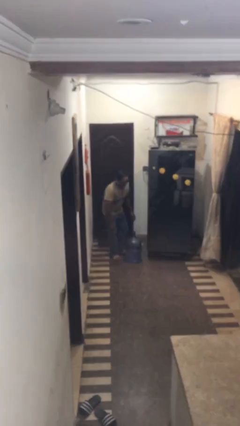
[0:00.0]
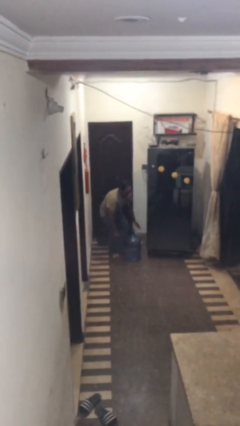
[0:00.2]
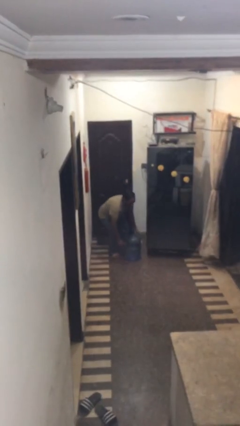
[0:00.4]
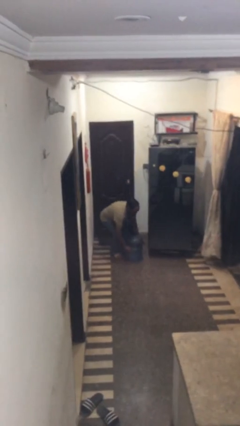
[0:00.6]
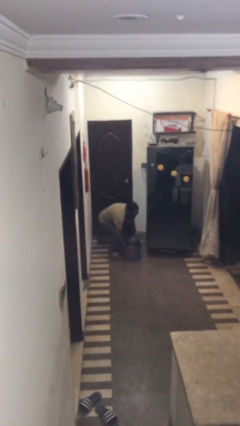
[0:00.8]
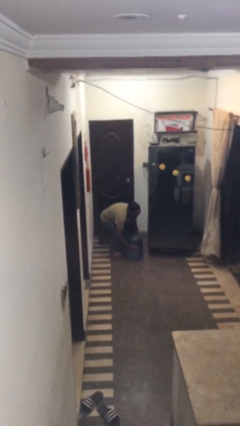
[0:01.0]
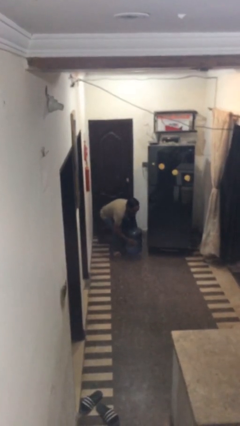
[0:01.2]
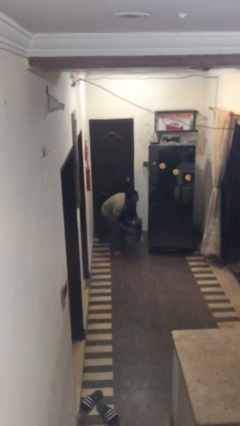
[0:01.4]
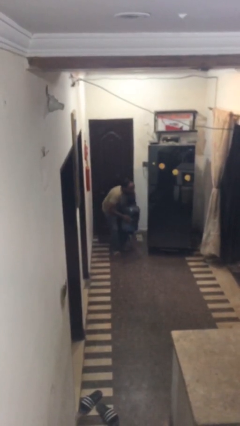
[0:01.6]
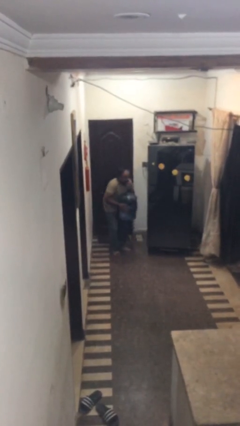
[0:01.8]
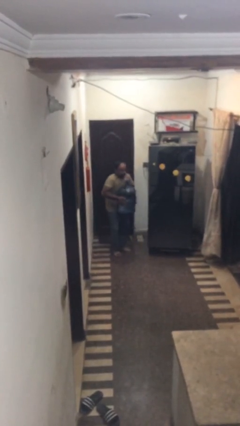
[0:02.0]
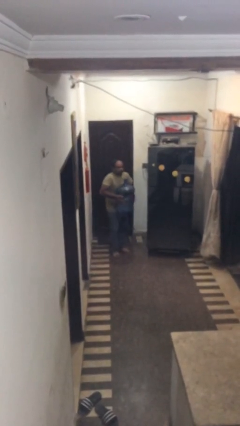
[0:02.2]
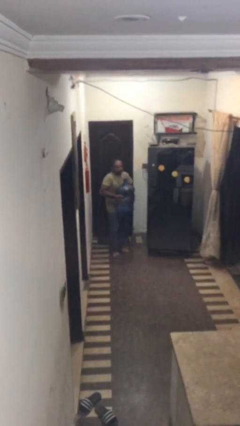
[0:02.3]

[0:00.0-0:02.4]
person picks up object from floor

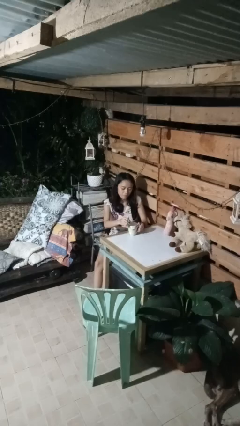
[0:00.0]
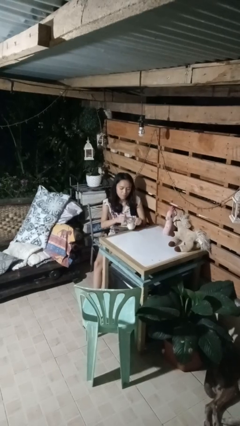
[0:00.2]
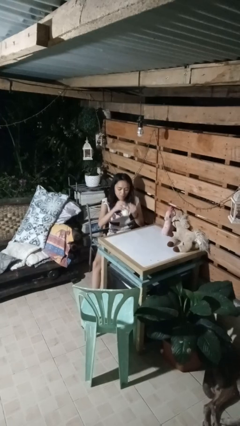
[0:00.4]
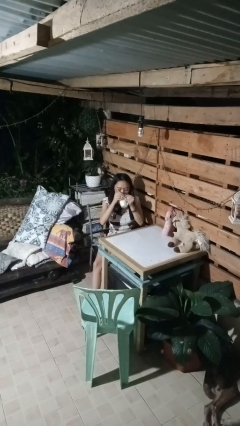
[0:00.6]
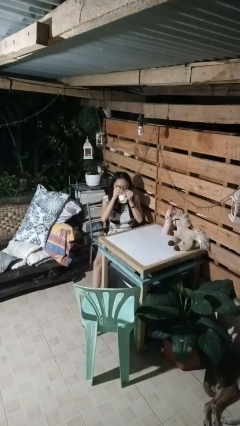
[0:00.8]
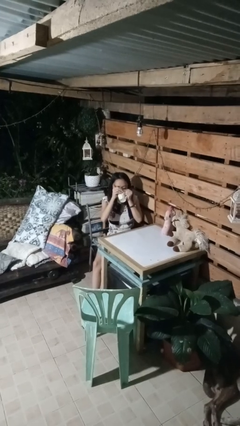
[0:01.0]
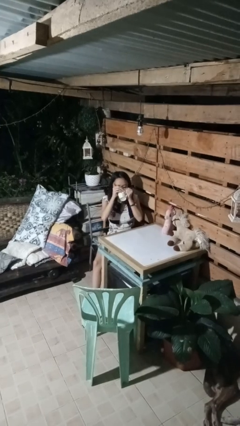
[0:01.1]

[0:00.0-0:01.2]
person drinks from mug

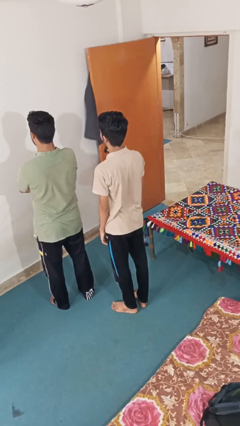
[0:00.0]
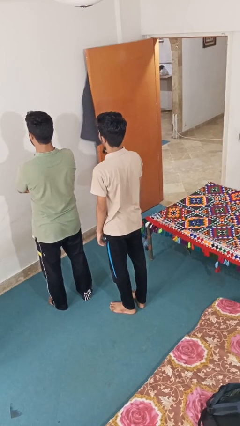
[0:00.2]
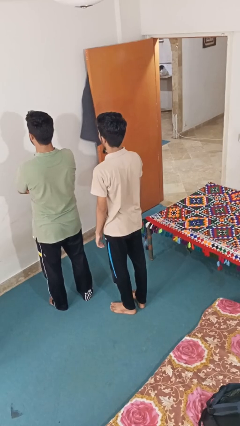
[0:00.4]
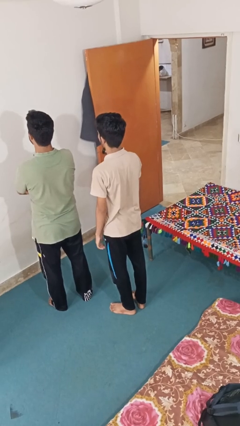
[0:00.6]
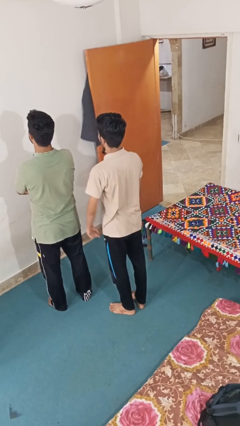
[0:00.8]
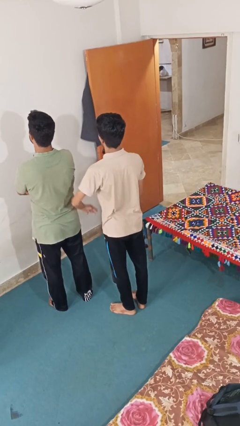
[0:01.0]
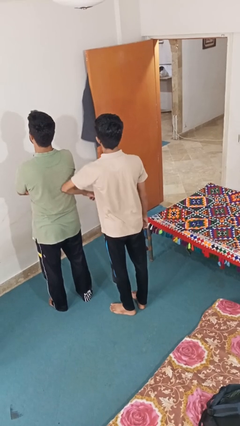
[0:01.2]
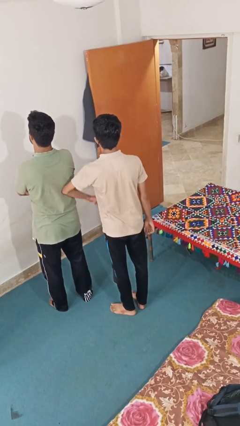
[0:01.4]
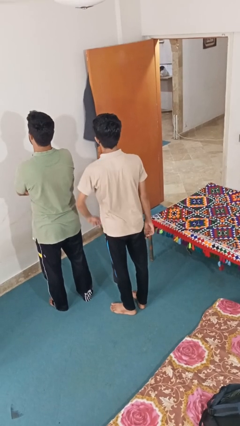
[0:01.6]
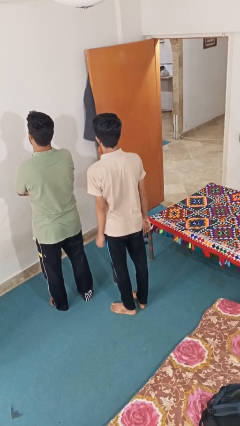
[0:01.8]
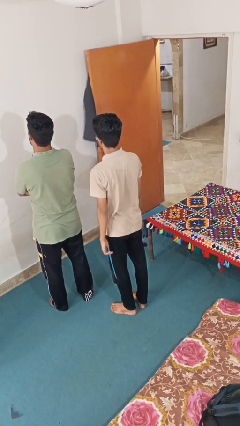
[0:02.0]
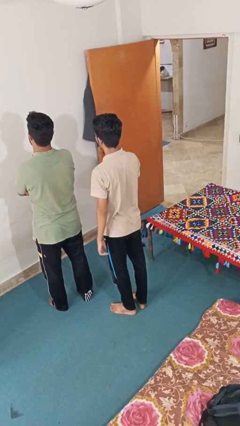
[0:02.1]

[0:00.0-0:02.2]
person nudges person with elbow

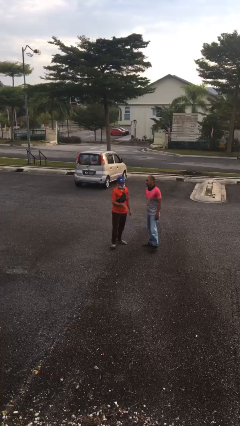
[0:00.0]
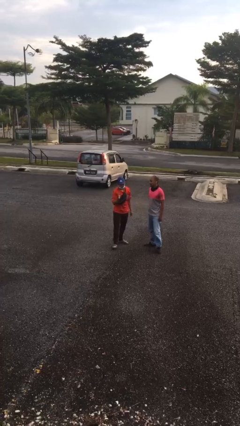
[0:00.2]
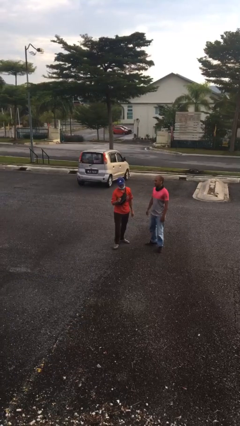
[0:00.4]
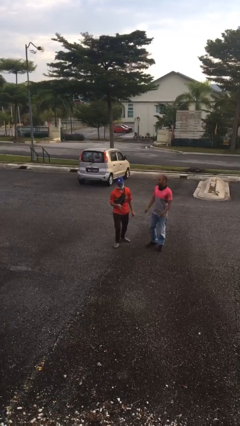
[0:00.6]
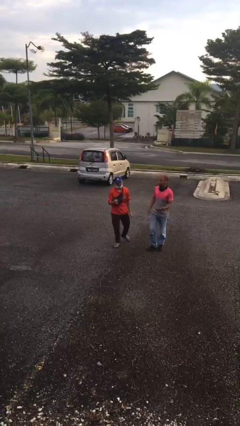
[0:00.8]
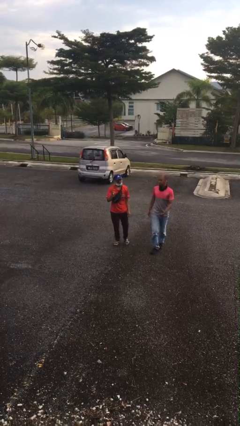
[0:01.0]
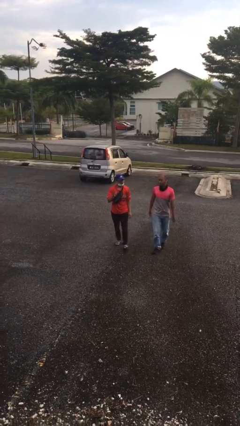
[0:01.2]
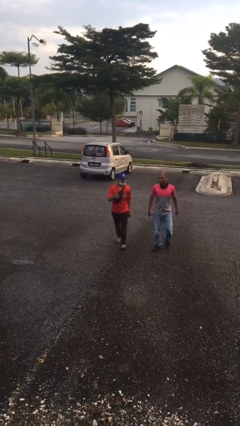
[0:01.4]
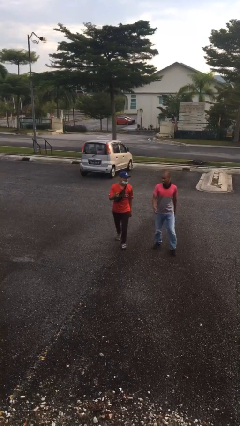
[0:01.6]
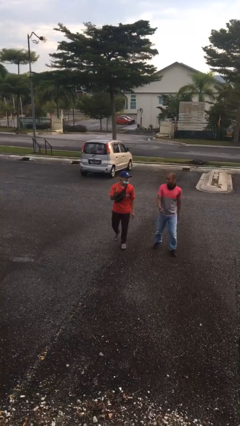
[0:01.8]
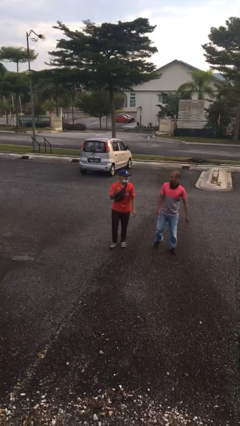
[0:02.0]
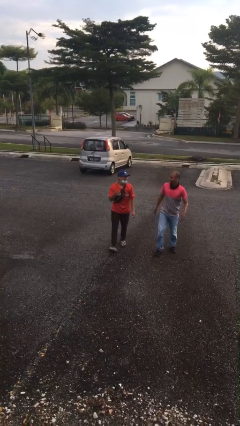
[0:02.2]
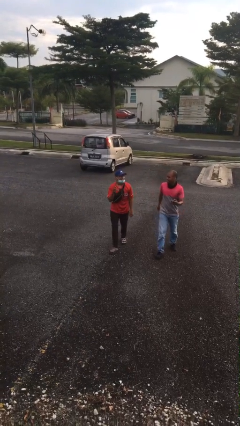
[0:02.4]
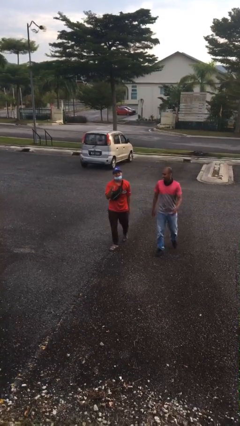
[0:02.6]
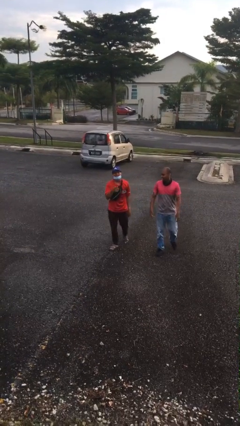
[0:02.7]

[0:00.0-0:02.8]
person talks to person

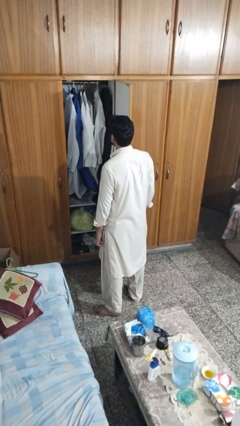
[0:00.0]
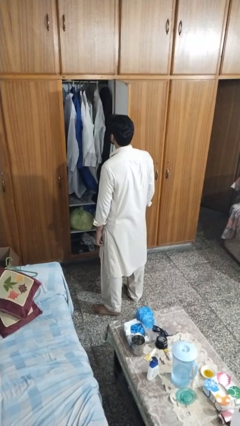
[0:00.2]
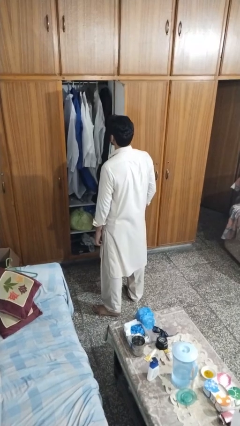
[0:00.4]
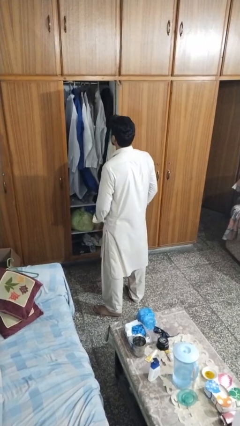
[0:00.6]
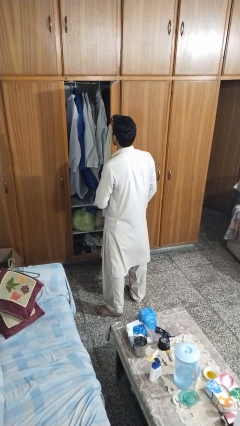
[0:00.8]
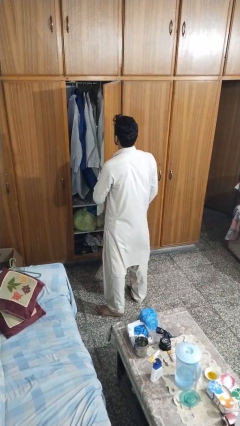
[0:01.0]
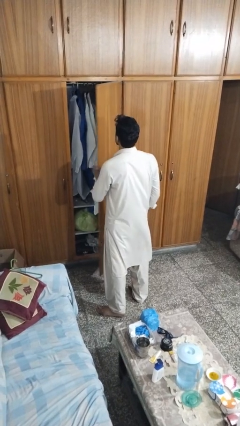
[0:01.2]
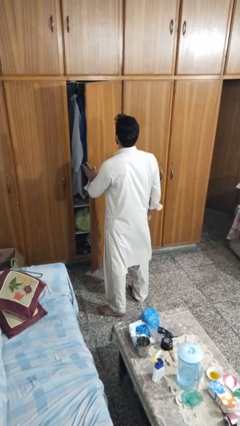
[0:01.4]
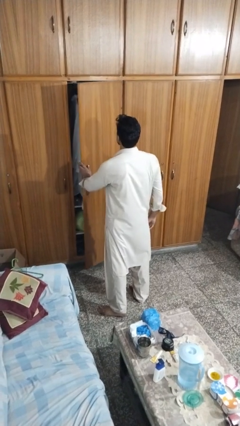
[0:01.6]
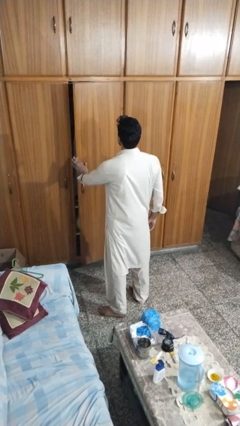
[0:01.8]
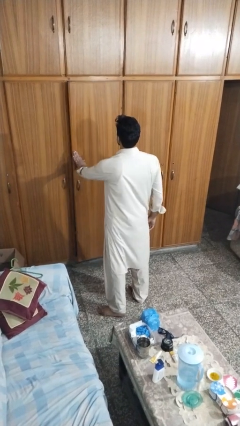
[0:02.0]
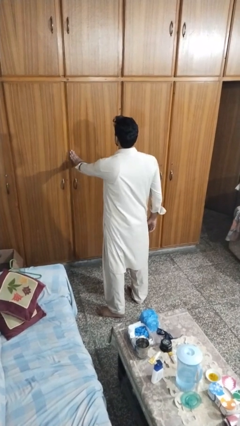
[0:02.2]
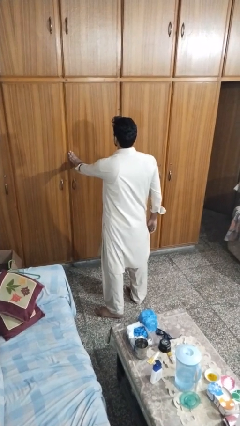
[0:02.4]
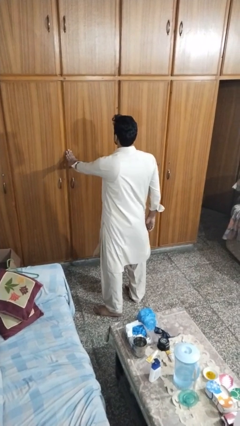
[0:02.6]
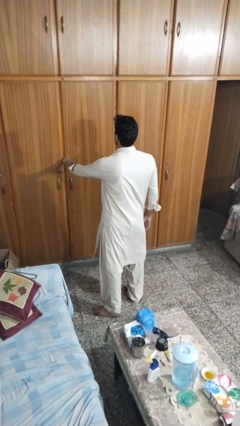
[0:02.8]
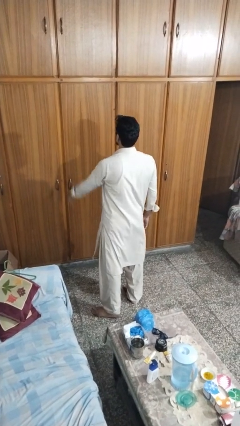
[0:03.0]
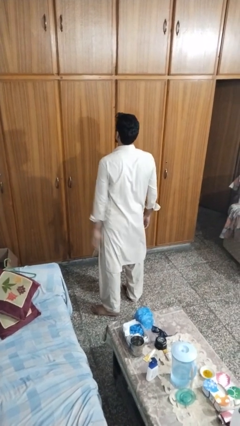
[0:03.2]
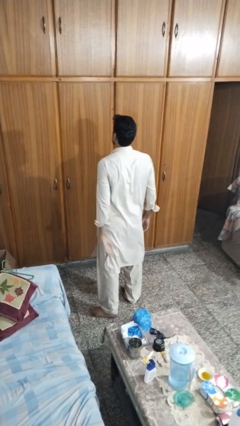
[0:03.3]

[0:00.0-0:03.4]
person closes closet door

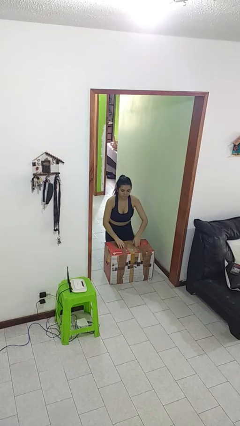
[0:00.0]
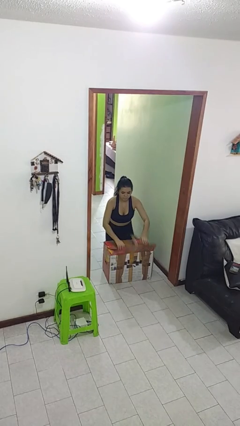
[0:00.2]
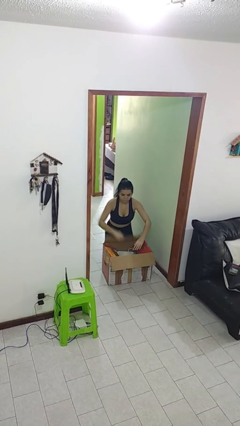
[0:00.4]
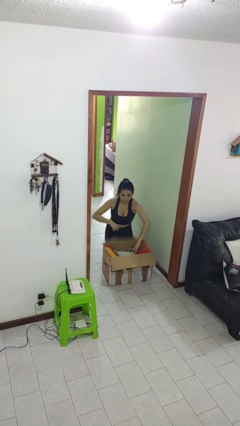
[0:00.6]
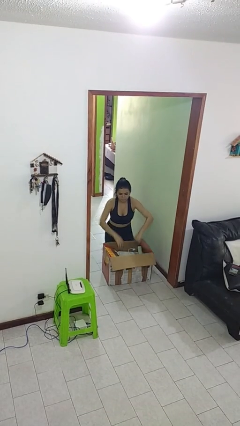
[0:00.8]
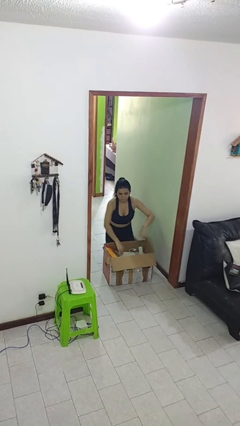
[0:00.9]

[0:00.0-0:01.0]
person opens box

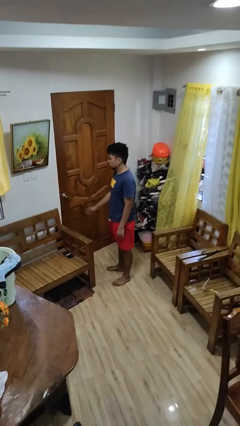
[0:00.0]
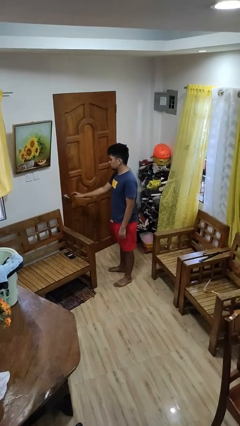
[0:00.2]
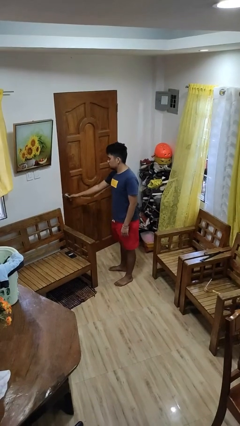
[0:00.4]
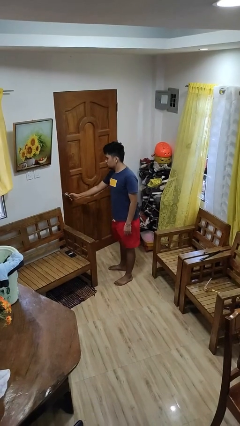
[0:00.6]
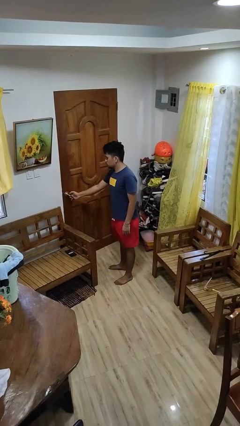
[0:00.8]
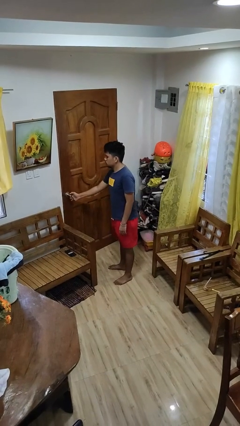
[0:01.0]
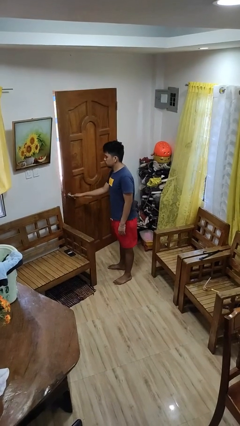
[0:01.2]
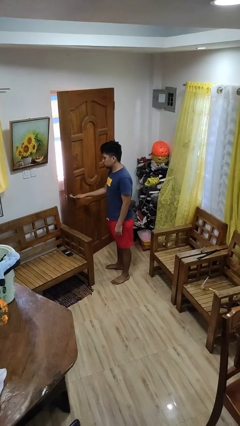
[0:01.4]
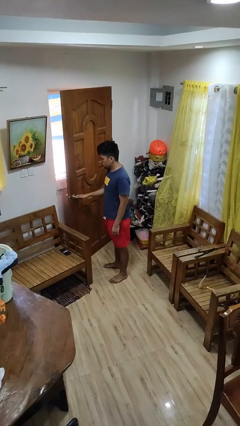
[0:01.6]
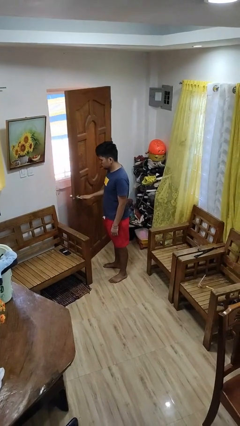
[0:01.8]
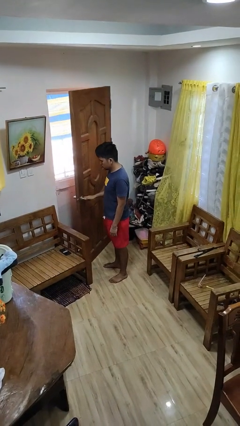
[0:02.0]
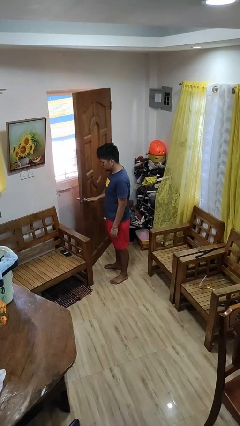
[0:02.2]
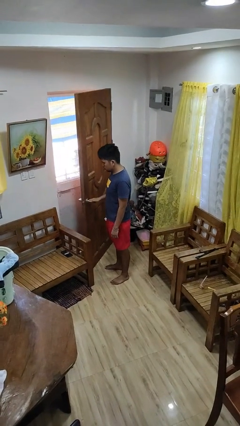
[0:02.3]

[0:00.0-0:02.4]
person opens facility door

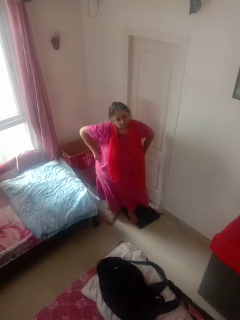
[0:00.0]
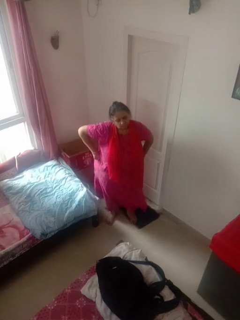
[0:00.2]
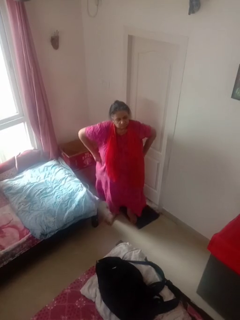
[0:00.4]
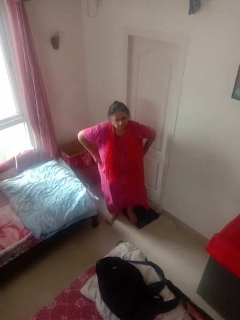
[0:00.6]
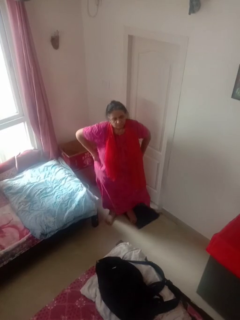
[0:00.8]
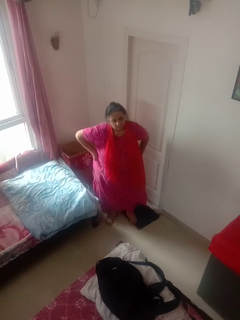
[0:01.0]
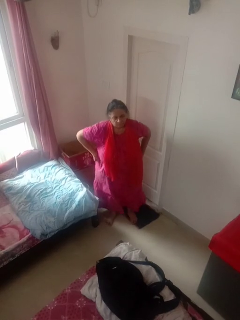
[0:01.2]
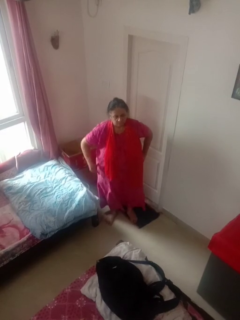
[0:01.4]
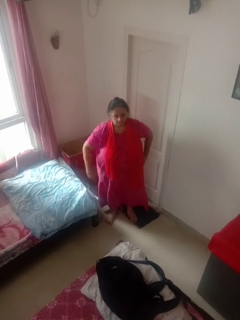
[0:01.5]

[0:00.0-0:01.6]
person wiggles hips

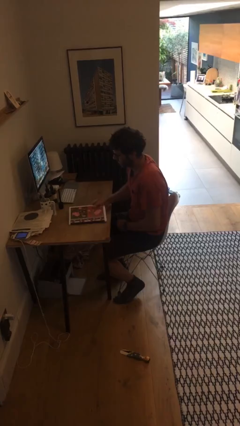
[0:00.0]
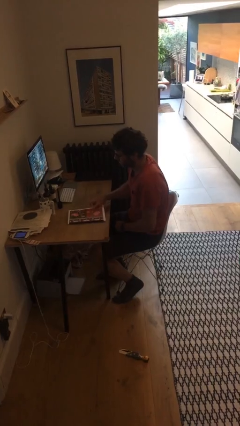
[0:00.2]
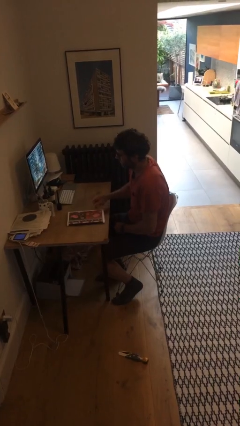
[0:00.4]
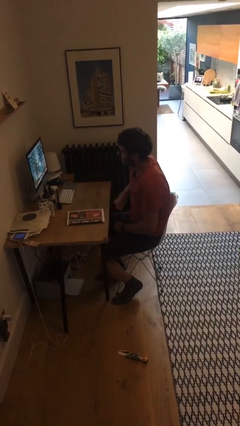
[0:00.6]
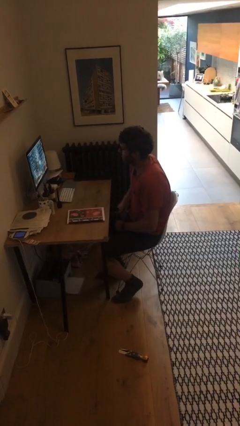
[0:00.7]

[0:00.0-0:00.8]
person puts down object on table
